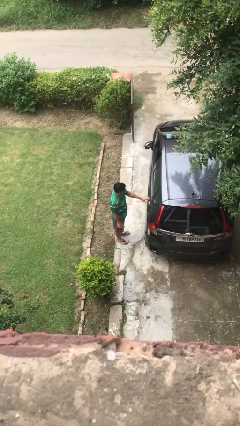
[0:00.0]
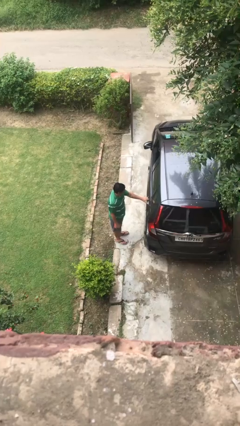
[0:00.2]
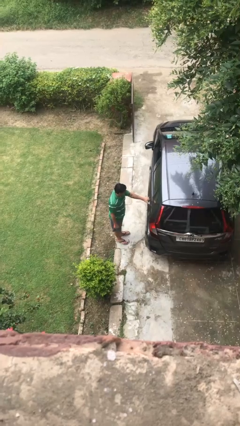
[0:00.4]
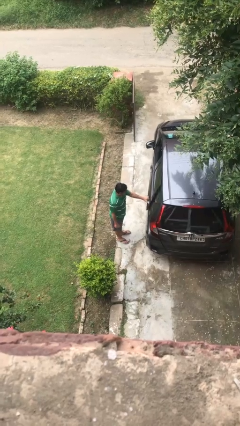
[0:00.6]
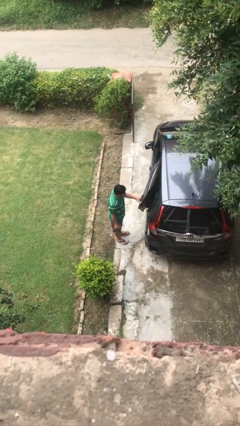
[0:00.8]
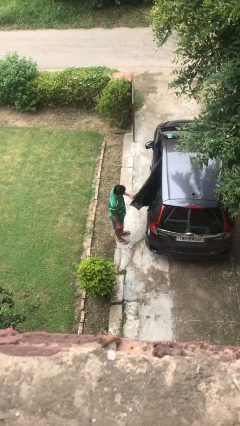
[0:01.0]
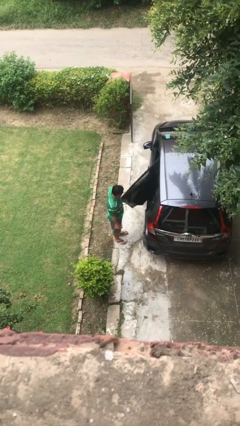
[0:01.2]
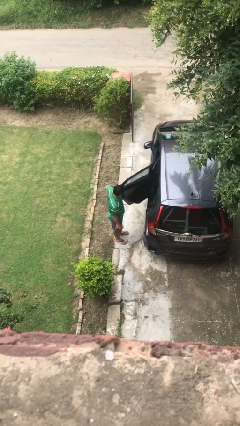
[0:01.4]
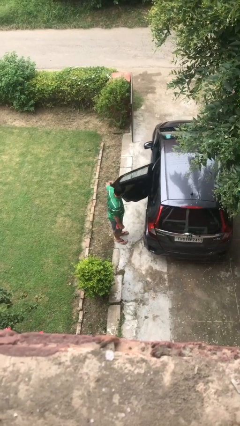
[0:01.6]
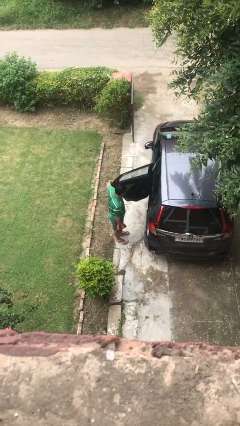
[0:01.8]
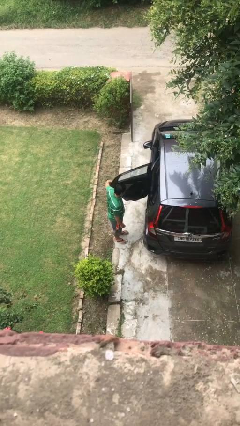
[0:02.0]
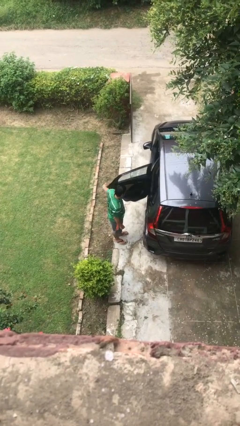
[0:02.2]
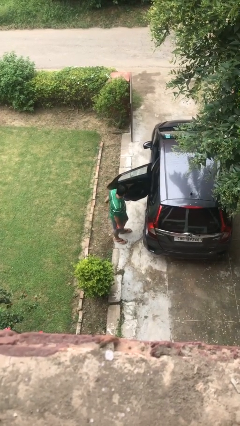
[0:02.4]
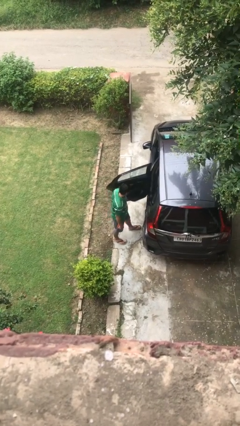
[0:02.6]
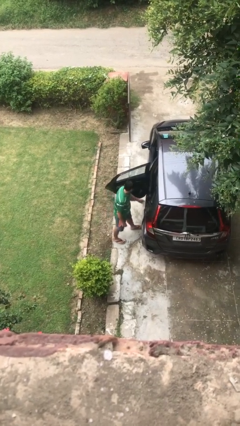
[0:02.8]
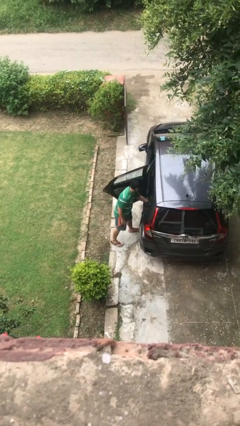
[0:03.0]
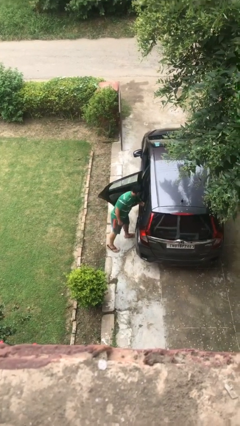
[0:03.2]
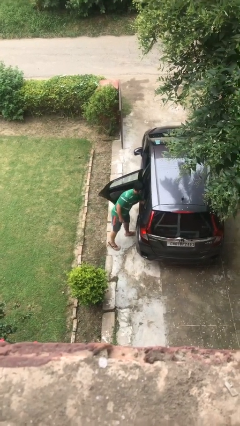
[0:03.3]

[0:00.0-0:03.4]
person opens car door

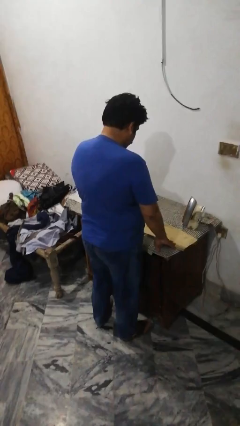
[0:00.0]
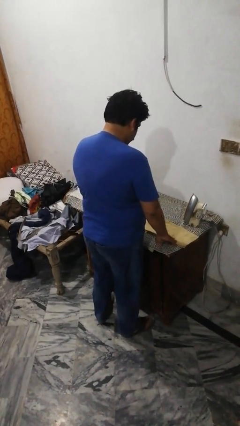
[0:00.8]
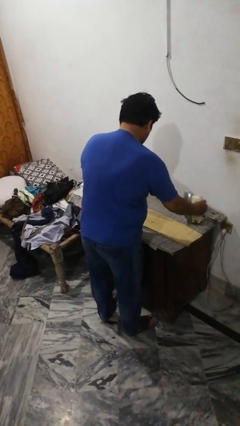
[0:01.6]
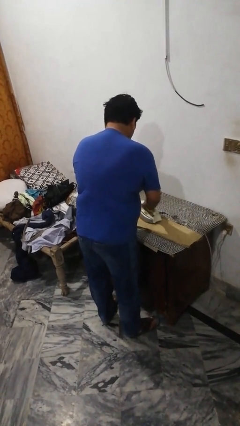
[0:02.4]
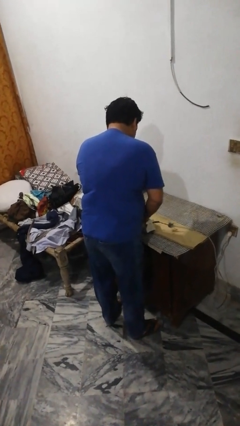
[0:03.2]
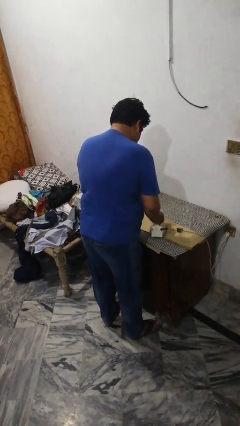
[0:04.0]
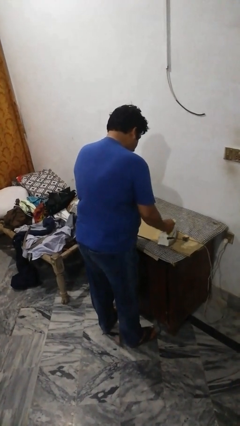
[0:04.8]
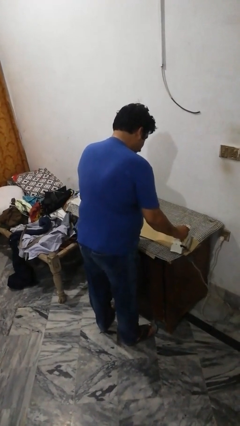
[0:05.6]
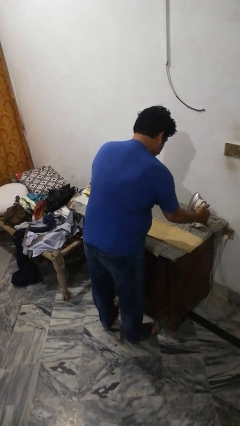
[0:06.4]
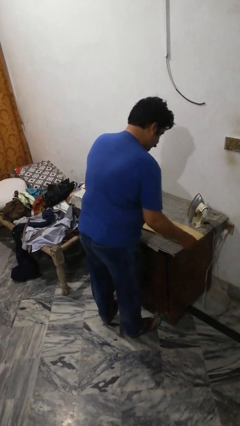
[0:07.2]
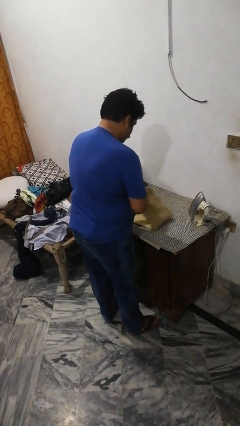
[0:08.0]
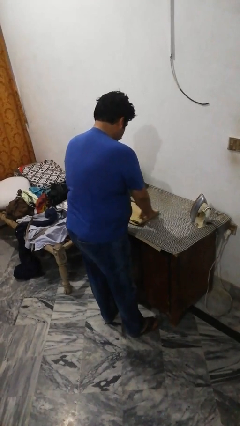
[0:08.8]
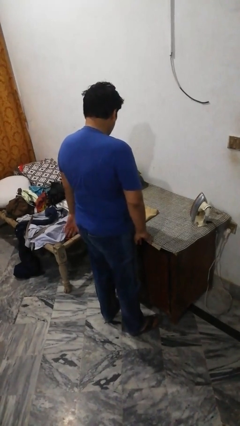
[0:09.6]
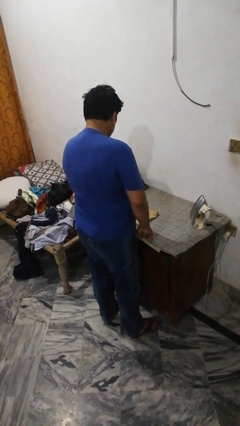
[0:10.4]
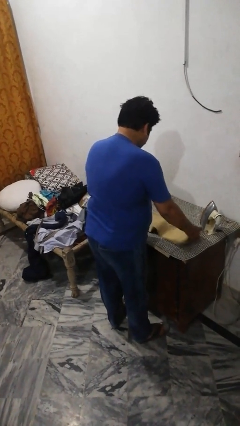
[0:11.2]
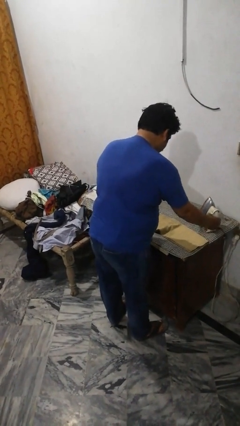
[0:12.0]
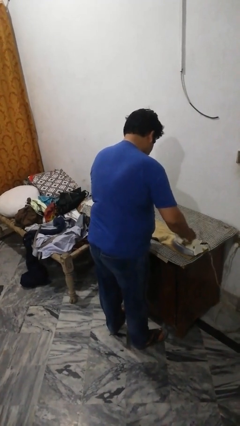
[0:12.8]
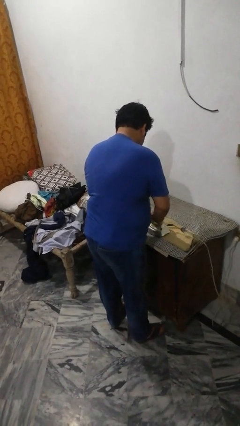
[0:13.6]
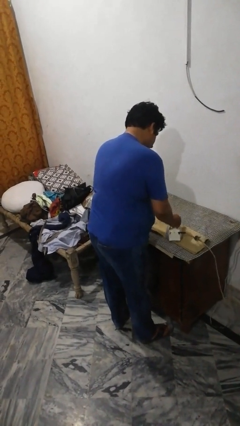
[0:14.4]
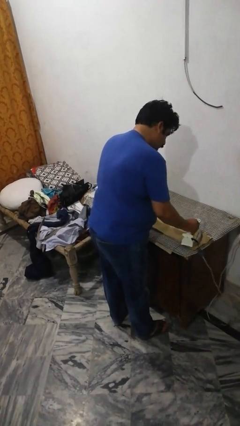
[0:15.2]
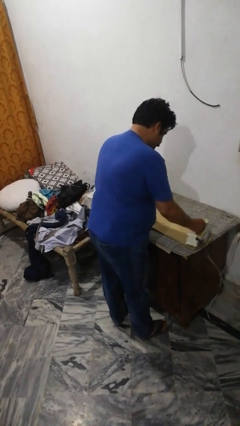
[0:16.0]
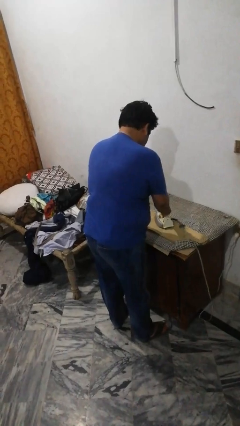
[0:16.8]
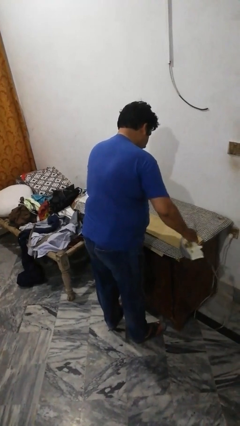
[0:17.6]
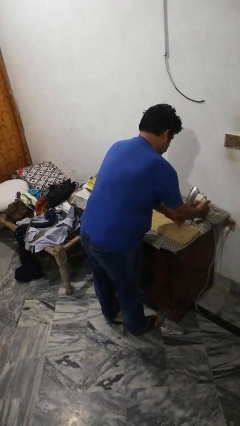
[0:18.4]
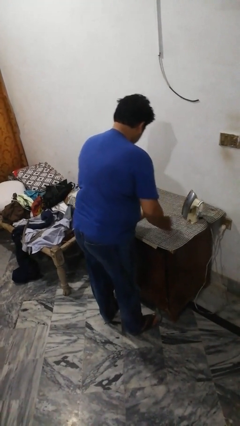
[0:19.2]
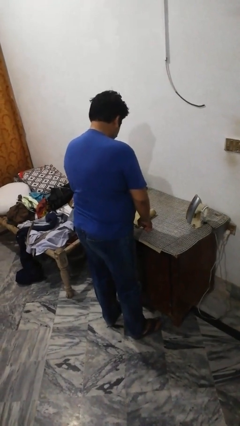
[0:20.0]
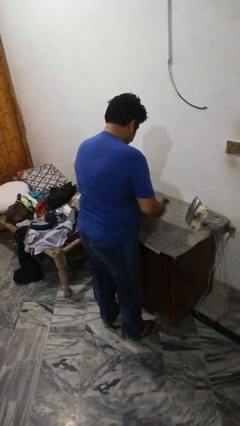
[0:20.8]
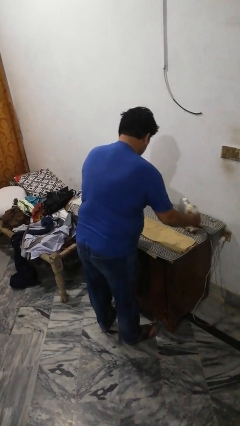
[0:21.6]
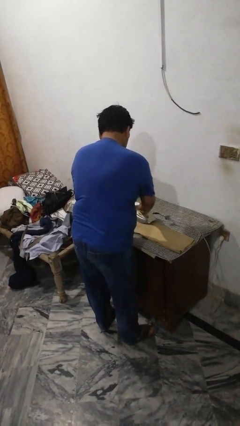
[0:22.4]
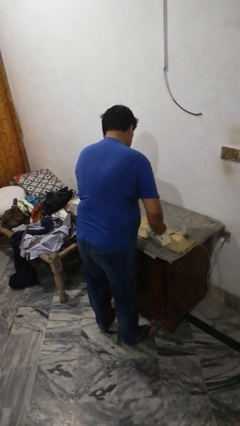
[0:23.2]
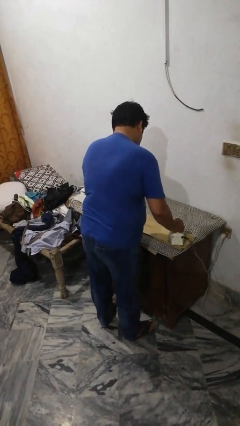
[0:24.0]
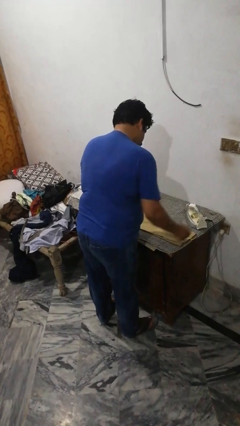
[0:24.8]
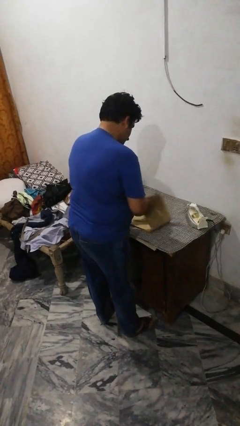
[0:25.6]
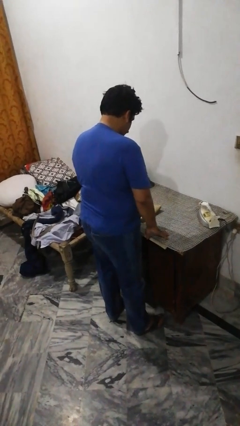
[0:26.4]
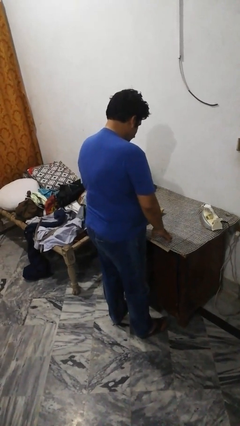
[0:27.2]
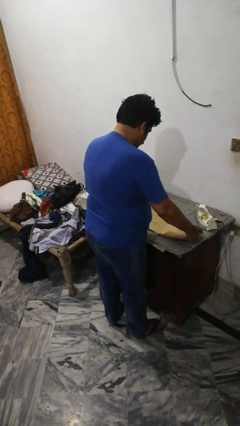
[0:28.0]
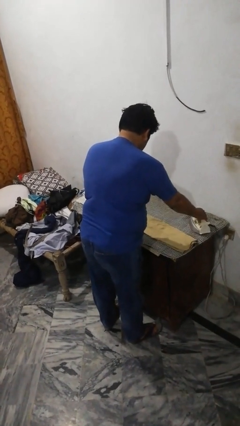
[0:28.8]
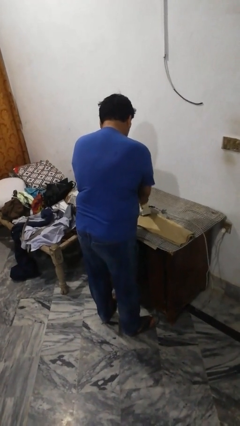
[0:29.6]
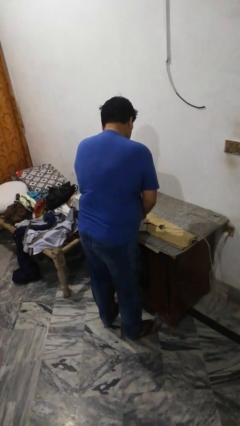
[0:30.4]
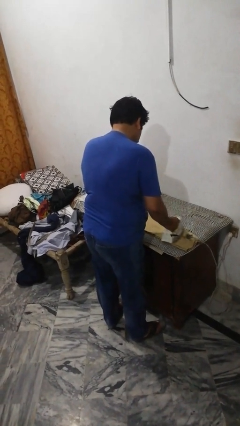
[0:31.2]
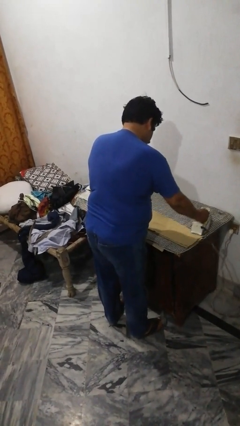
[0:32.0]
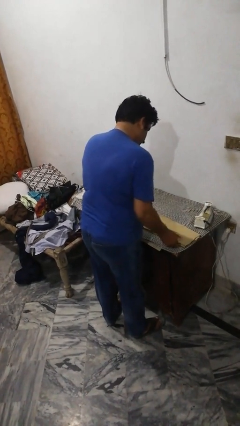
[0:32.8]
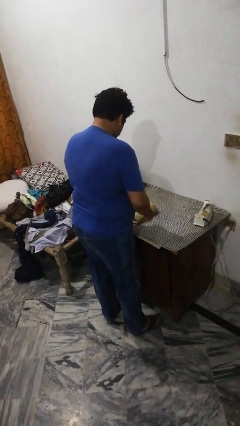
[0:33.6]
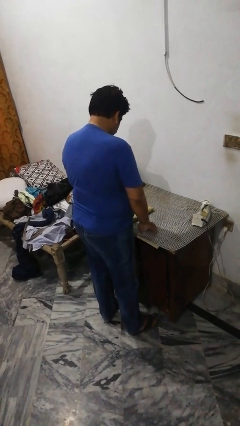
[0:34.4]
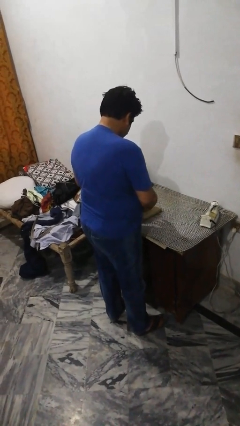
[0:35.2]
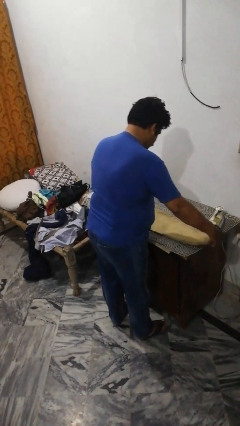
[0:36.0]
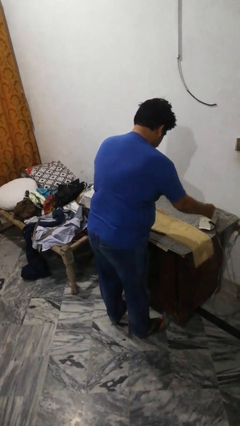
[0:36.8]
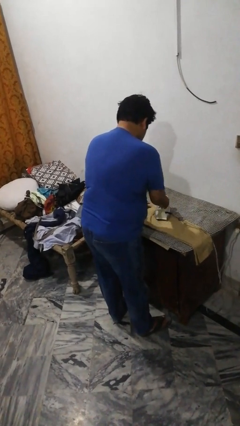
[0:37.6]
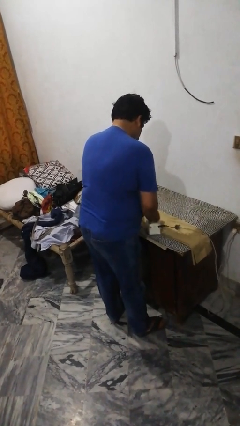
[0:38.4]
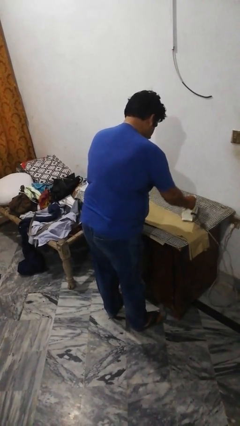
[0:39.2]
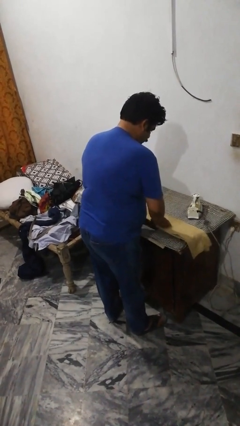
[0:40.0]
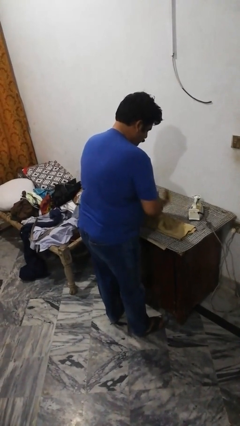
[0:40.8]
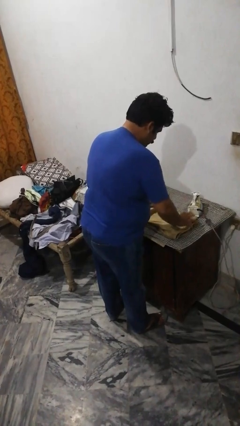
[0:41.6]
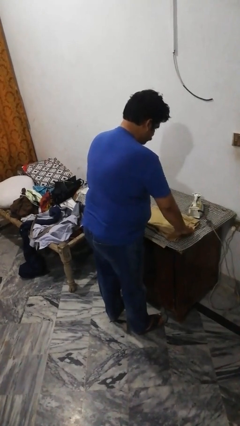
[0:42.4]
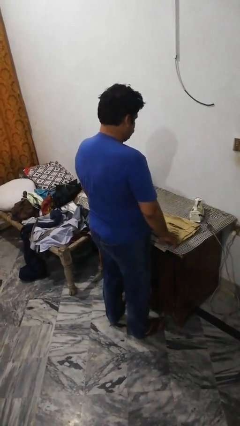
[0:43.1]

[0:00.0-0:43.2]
person irons clothes

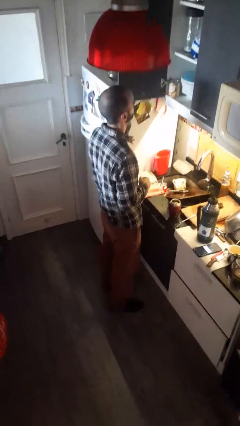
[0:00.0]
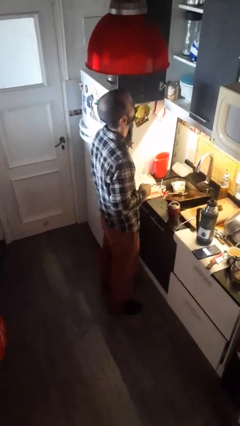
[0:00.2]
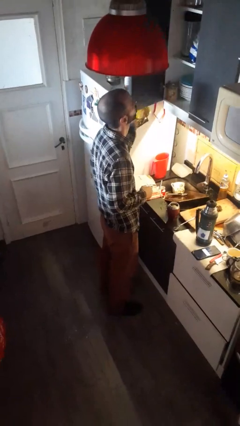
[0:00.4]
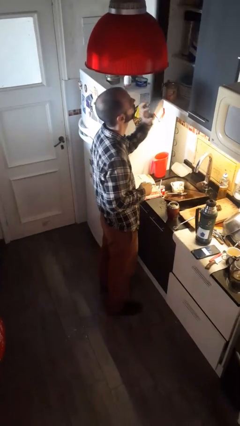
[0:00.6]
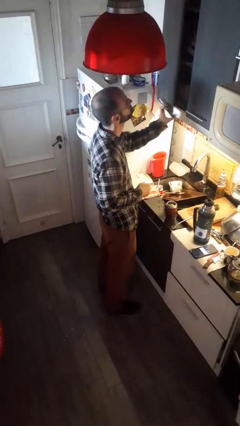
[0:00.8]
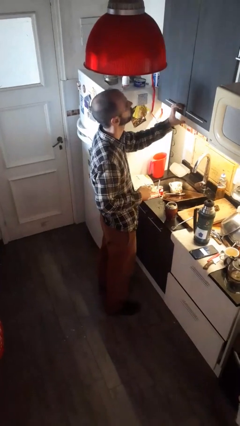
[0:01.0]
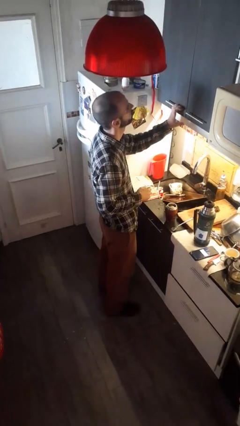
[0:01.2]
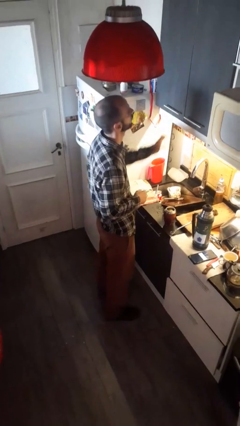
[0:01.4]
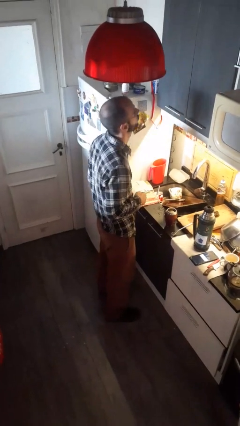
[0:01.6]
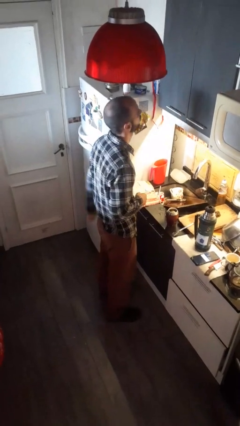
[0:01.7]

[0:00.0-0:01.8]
person closes kitchen drawer

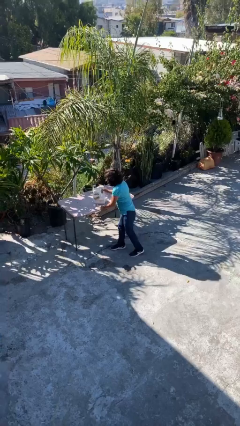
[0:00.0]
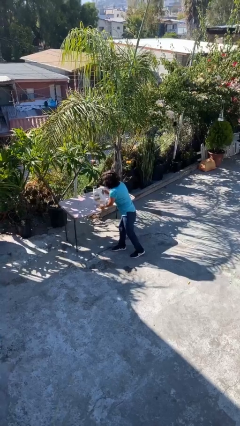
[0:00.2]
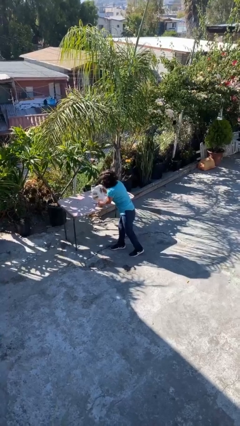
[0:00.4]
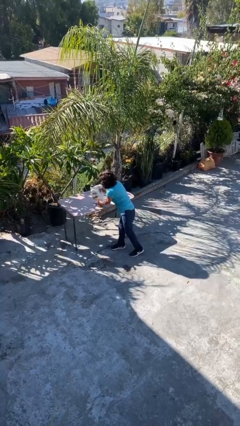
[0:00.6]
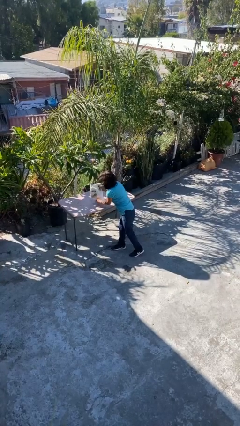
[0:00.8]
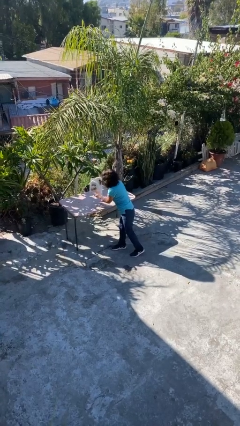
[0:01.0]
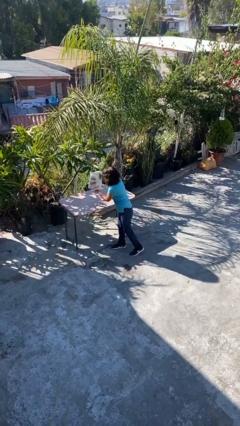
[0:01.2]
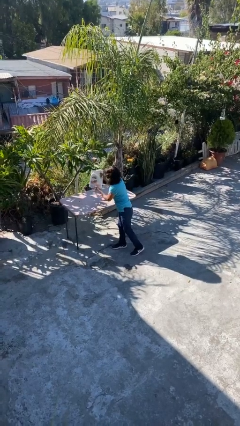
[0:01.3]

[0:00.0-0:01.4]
person picks up object from table

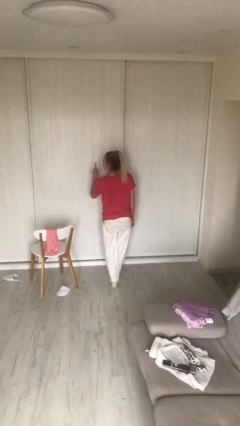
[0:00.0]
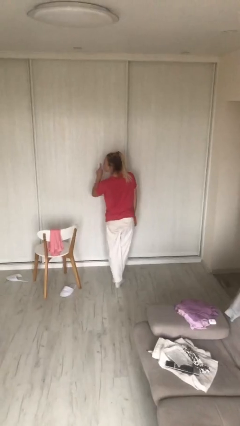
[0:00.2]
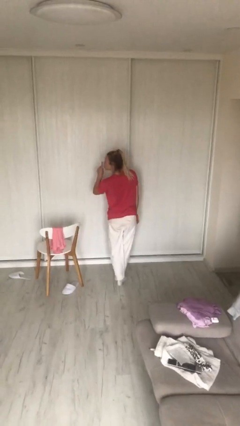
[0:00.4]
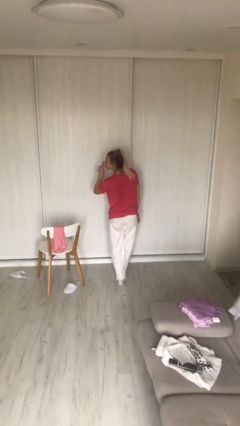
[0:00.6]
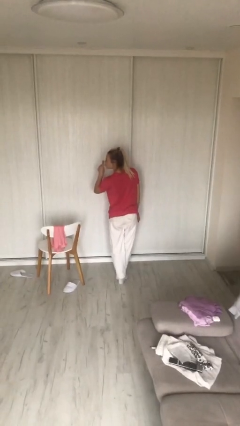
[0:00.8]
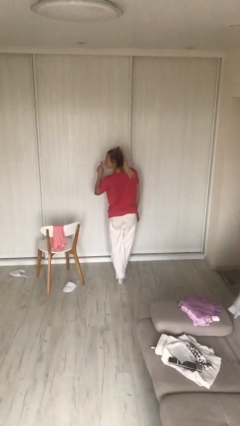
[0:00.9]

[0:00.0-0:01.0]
person gestures be quiet
